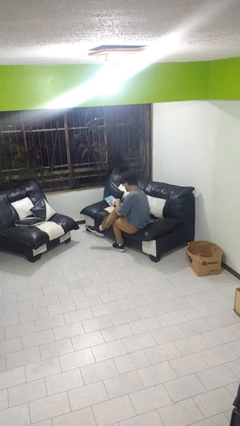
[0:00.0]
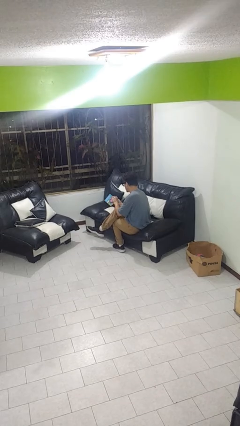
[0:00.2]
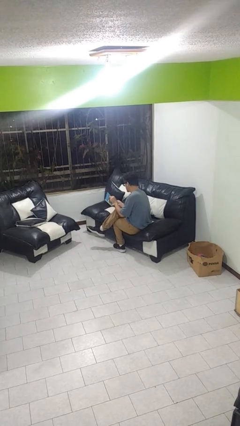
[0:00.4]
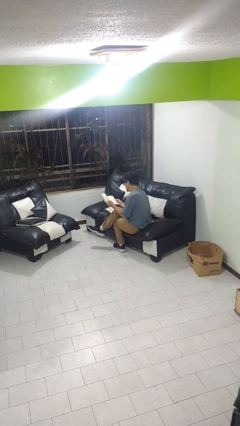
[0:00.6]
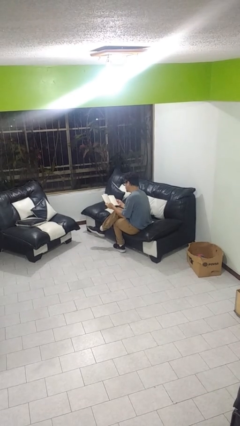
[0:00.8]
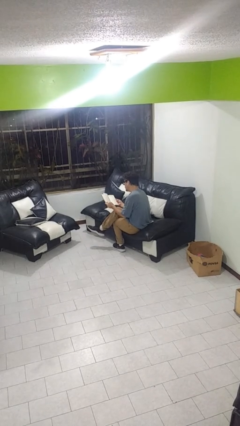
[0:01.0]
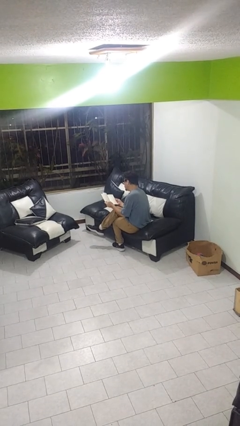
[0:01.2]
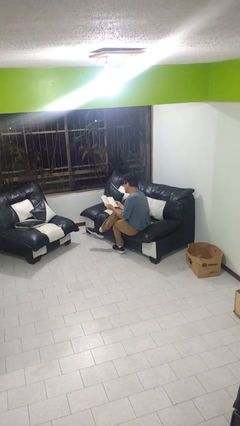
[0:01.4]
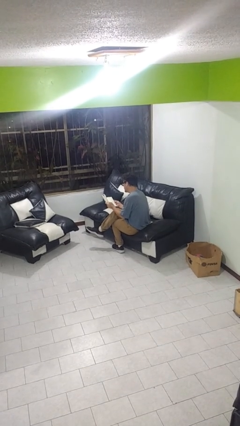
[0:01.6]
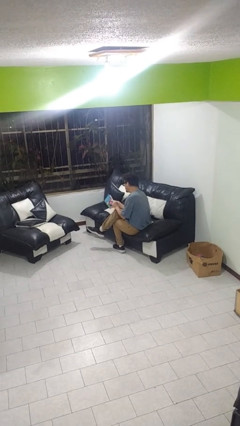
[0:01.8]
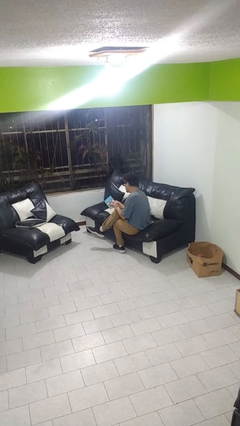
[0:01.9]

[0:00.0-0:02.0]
person reads book

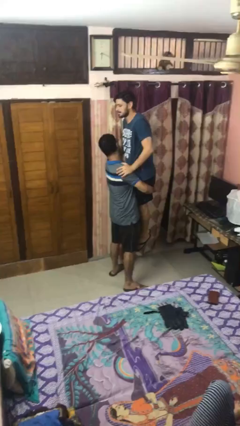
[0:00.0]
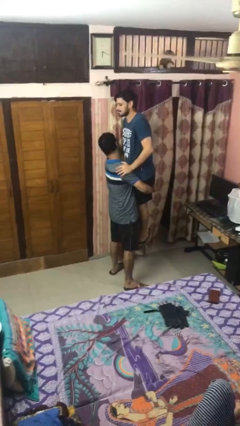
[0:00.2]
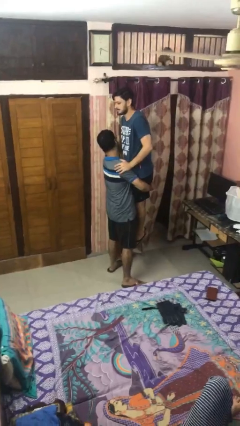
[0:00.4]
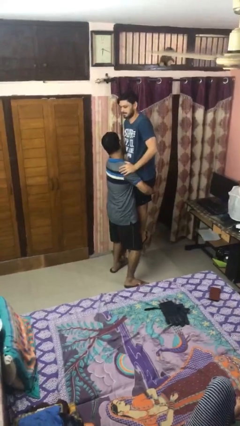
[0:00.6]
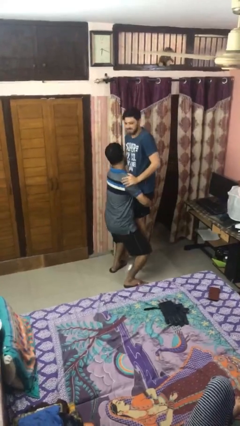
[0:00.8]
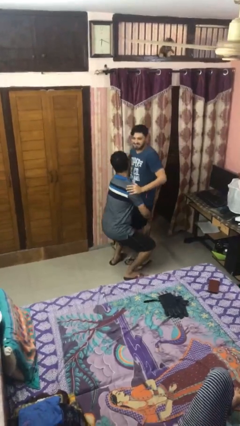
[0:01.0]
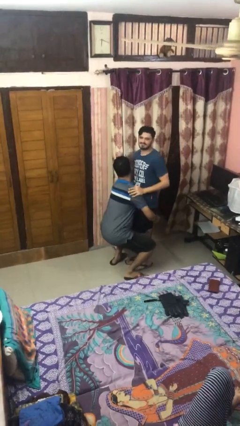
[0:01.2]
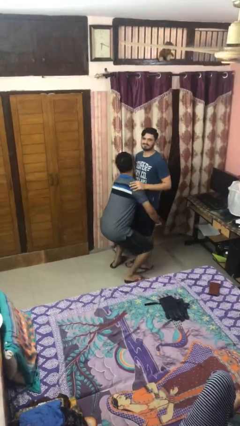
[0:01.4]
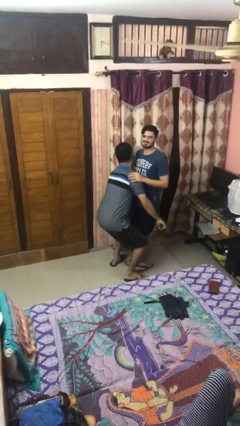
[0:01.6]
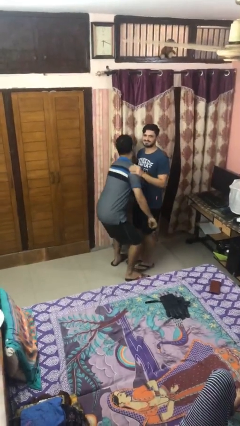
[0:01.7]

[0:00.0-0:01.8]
person puts down person

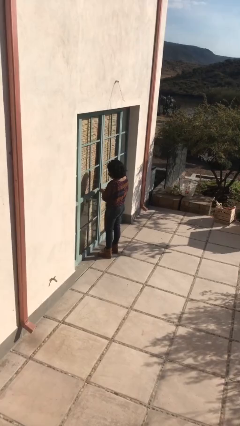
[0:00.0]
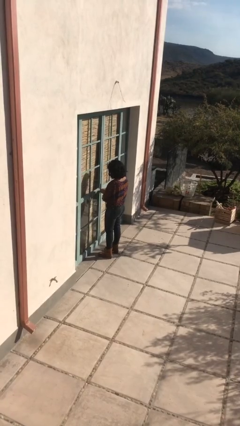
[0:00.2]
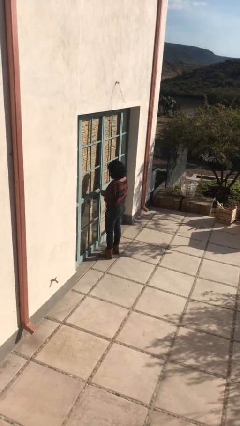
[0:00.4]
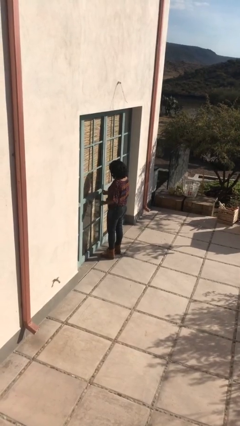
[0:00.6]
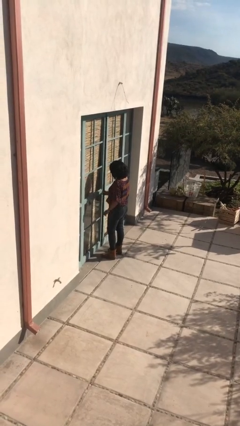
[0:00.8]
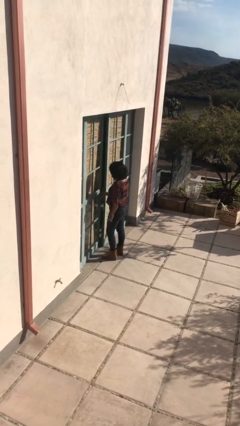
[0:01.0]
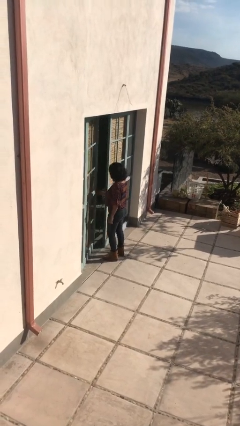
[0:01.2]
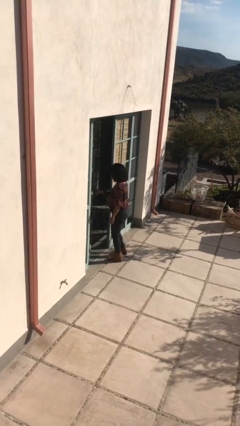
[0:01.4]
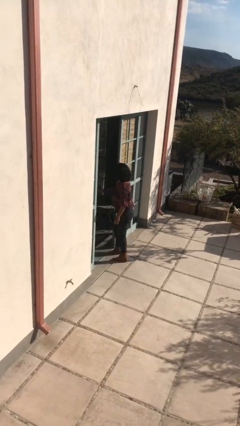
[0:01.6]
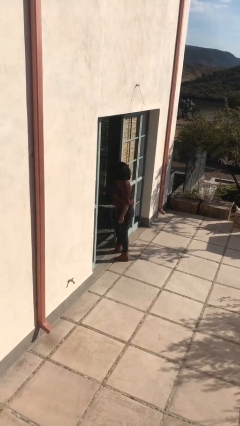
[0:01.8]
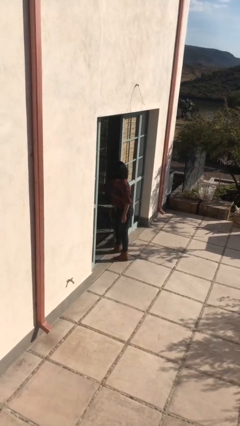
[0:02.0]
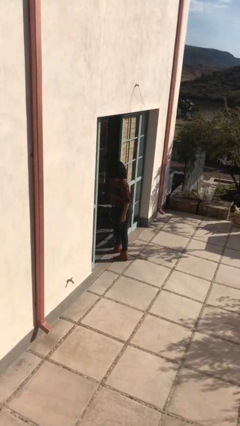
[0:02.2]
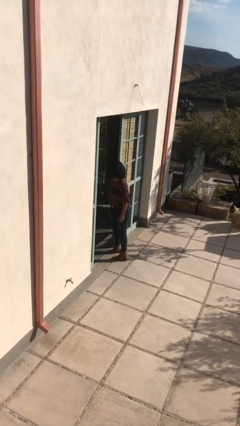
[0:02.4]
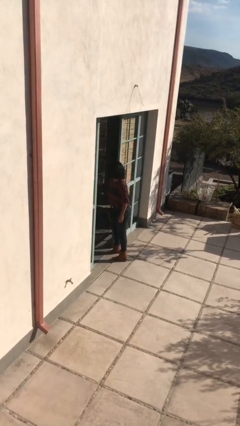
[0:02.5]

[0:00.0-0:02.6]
person opens facility door

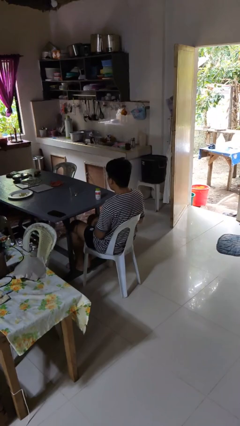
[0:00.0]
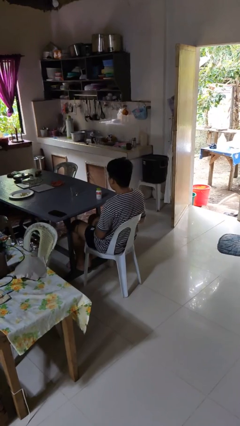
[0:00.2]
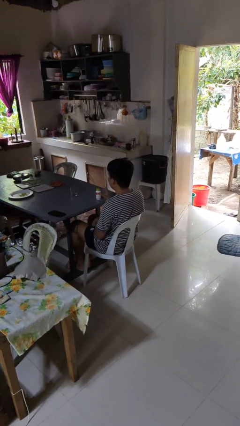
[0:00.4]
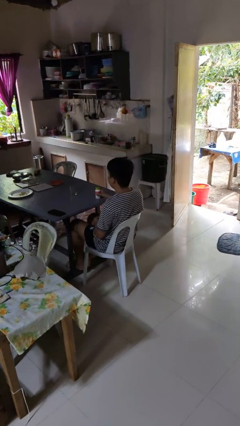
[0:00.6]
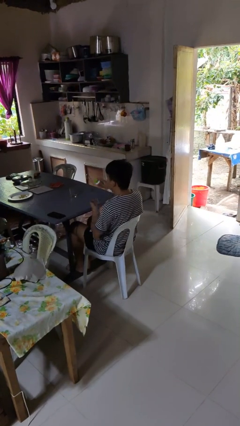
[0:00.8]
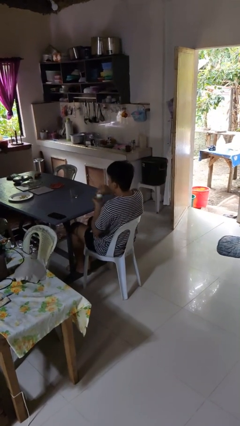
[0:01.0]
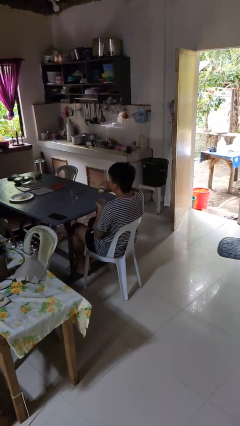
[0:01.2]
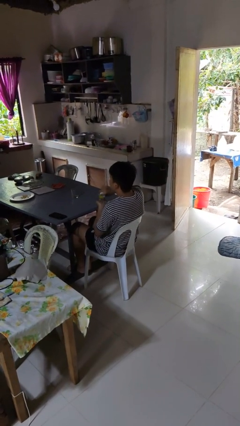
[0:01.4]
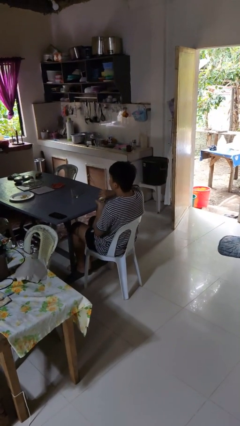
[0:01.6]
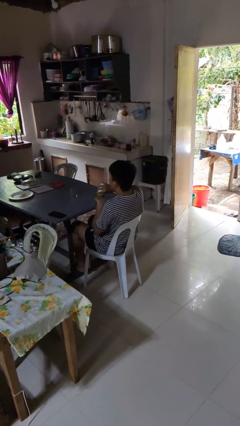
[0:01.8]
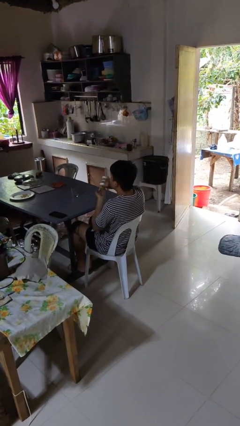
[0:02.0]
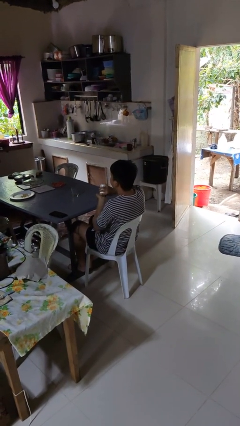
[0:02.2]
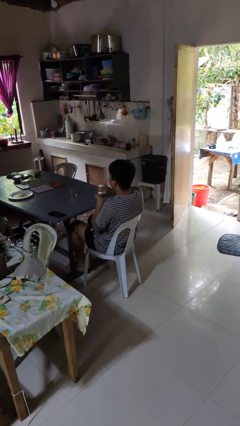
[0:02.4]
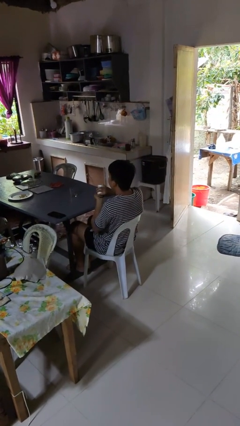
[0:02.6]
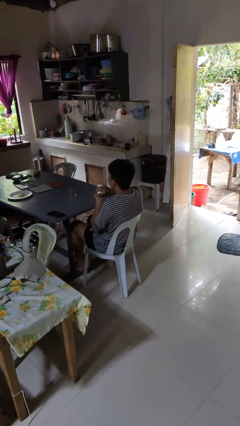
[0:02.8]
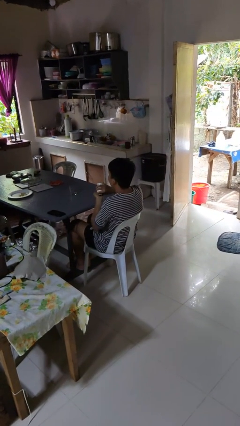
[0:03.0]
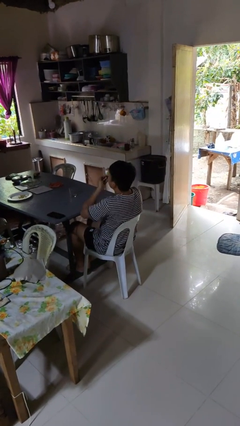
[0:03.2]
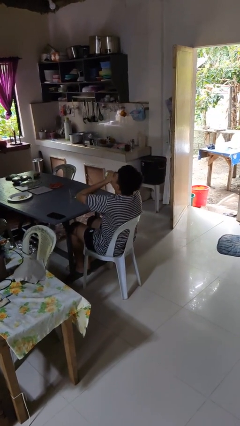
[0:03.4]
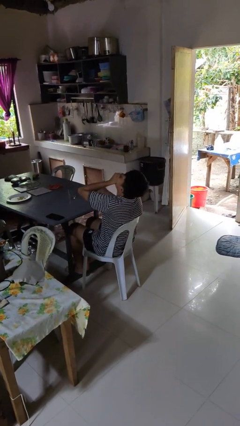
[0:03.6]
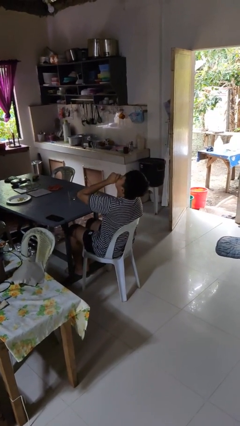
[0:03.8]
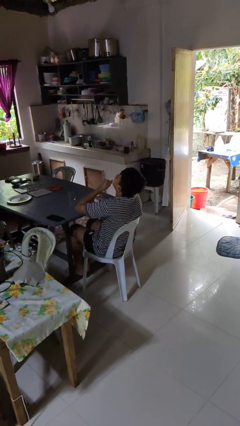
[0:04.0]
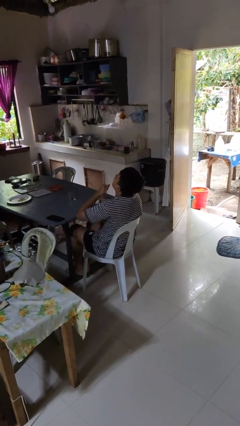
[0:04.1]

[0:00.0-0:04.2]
person takes medicine pills

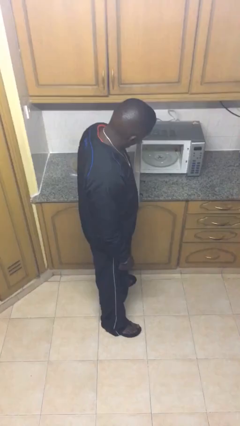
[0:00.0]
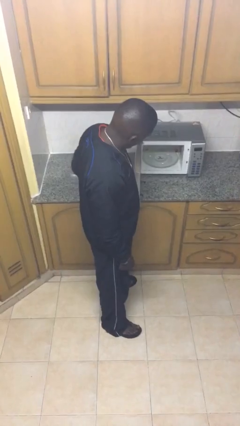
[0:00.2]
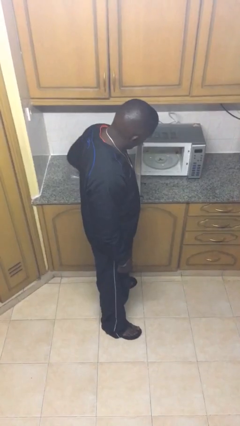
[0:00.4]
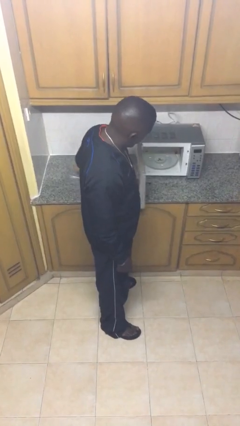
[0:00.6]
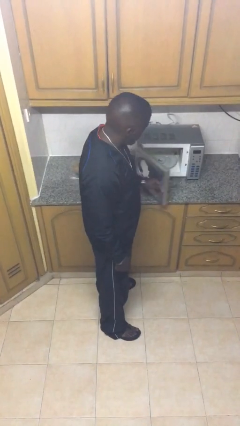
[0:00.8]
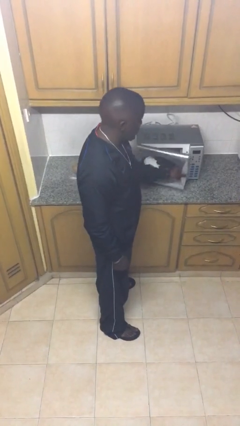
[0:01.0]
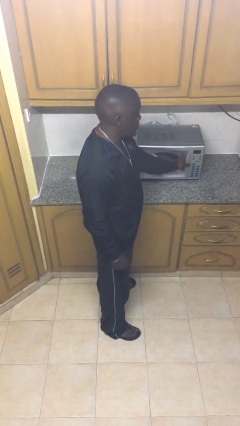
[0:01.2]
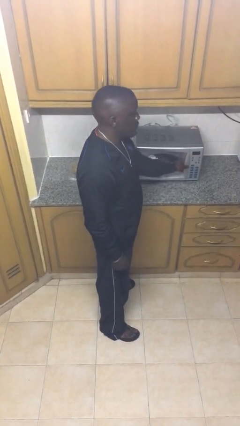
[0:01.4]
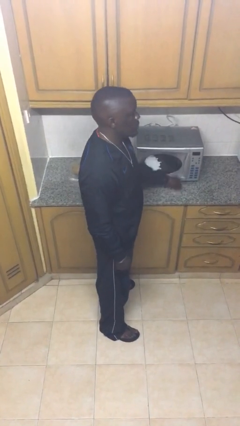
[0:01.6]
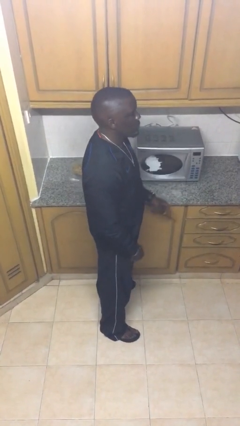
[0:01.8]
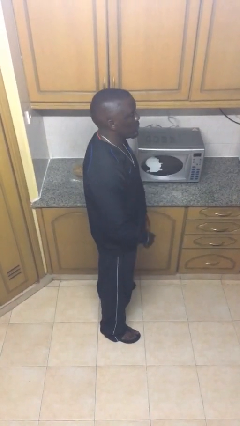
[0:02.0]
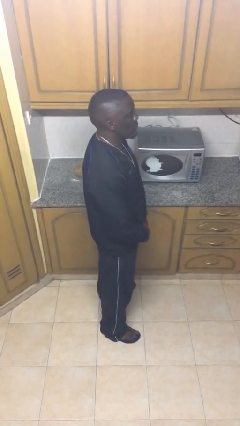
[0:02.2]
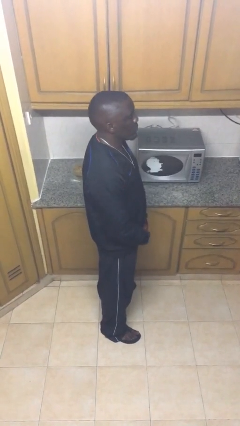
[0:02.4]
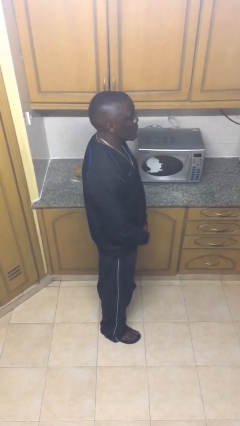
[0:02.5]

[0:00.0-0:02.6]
person closes microwave

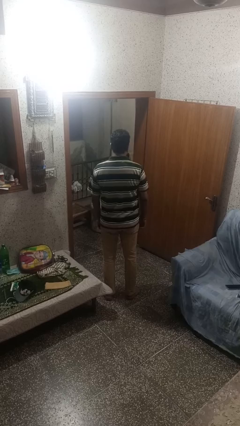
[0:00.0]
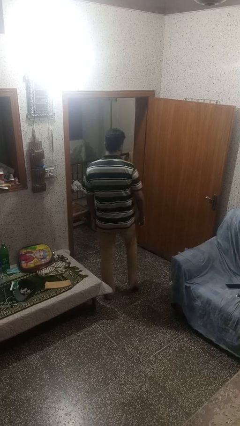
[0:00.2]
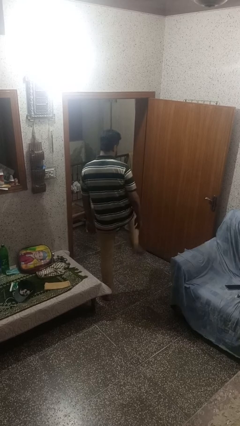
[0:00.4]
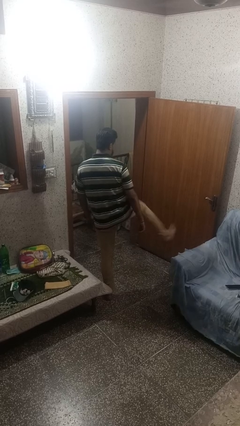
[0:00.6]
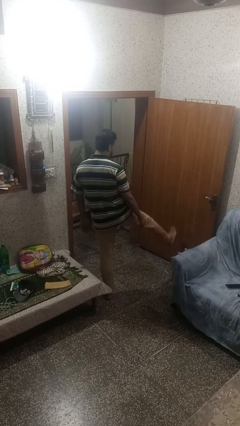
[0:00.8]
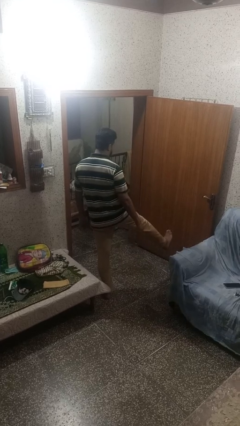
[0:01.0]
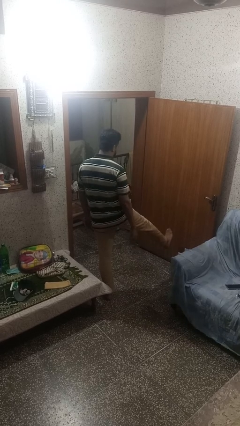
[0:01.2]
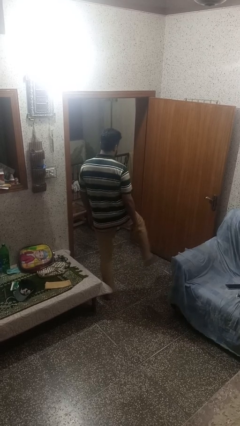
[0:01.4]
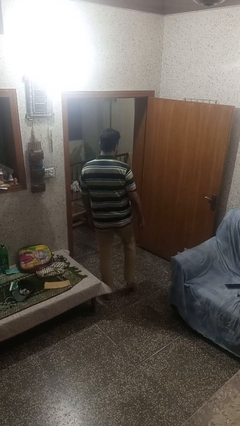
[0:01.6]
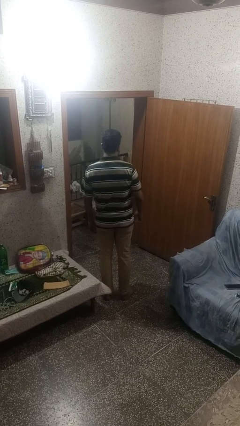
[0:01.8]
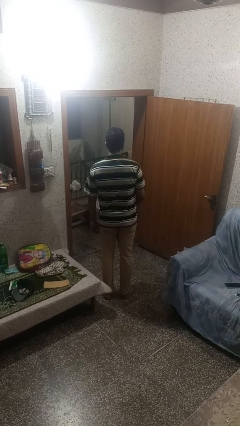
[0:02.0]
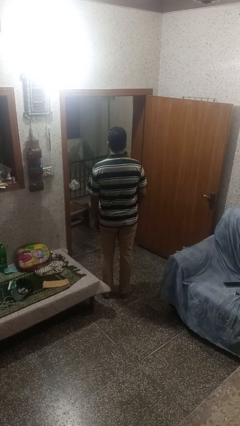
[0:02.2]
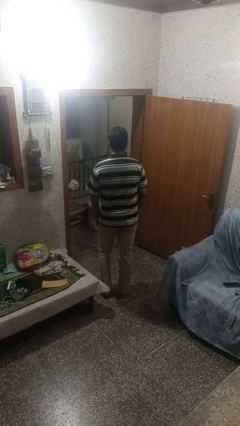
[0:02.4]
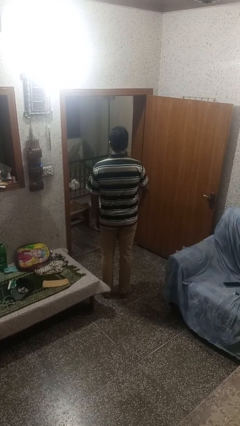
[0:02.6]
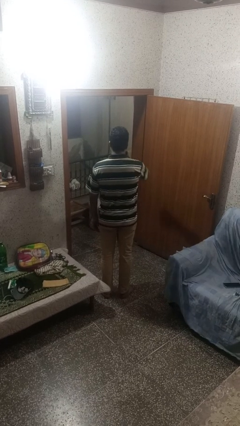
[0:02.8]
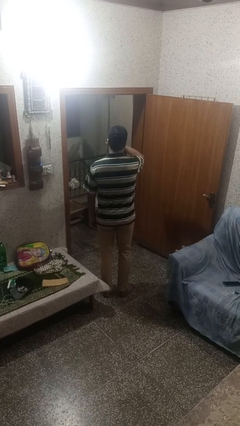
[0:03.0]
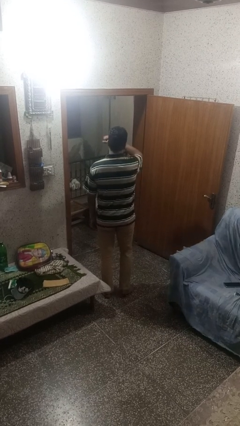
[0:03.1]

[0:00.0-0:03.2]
person karate kicks

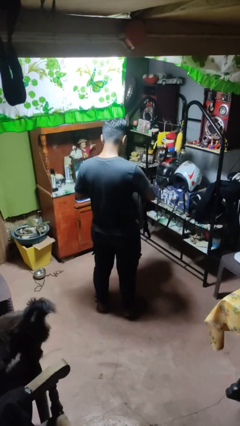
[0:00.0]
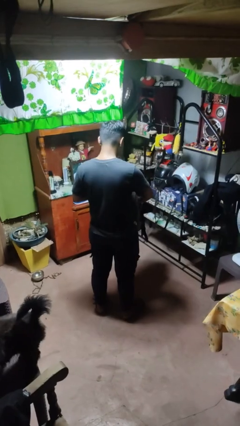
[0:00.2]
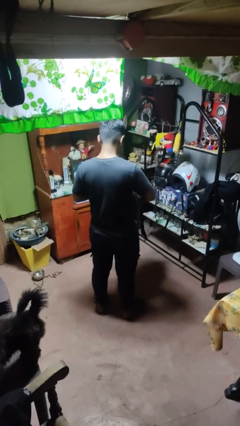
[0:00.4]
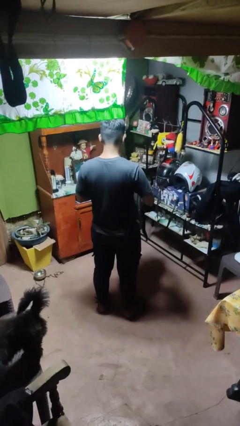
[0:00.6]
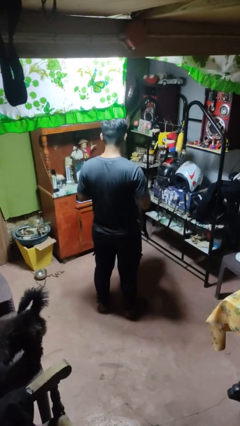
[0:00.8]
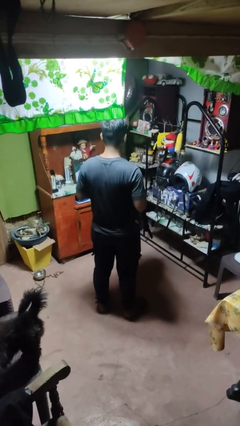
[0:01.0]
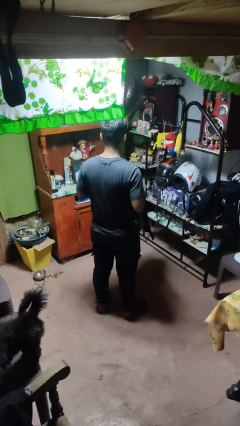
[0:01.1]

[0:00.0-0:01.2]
person puts object into bag
